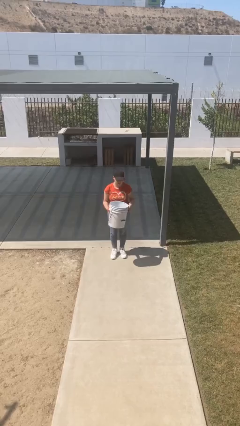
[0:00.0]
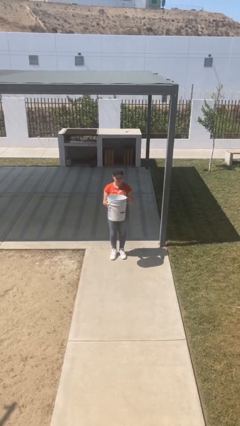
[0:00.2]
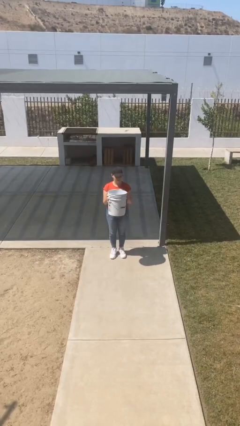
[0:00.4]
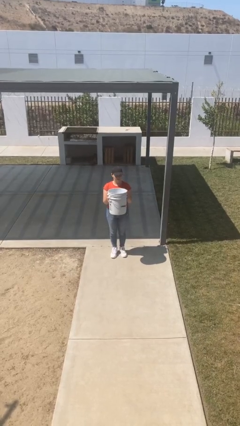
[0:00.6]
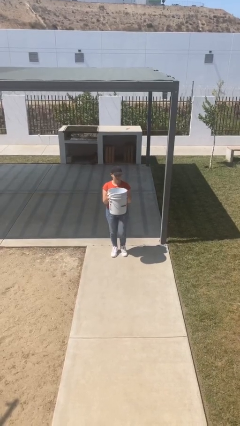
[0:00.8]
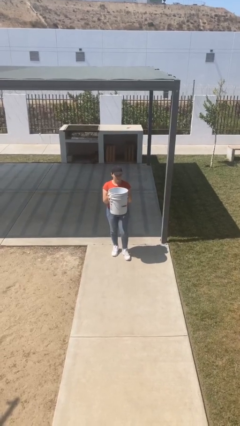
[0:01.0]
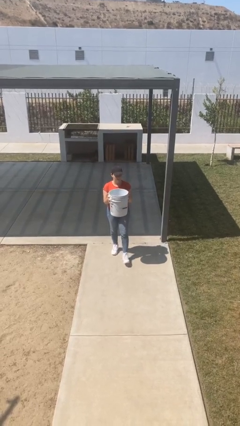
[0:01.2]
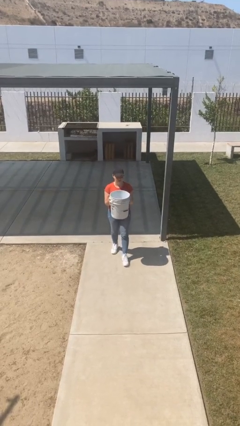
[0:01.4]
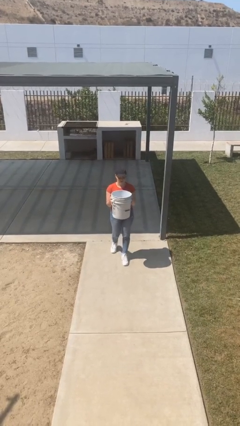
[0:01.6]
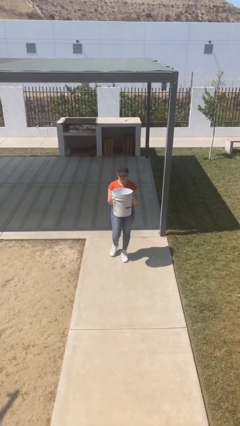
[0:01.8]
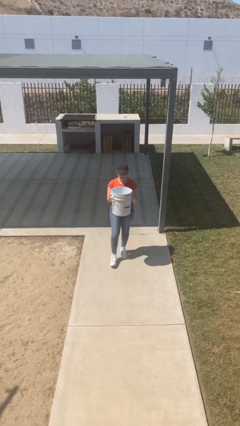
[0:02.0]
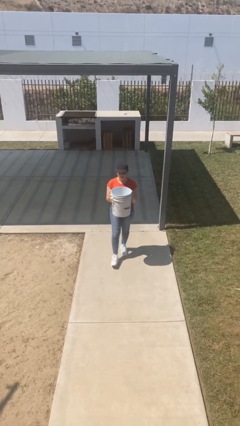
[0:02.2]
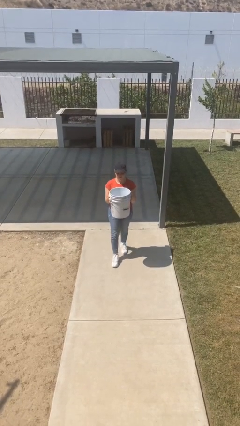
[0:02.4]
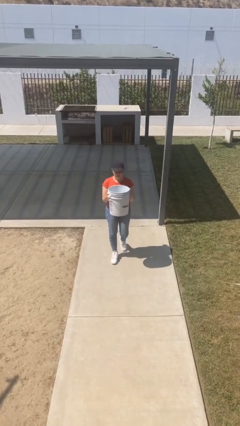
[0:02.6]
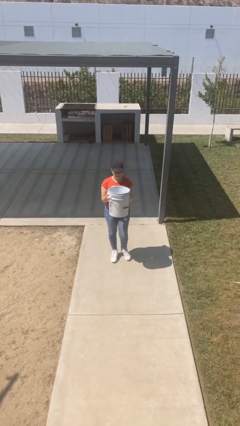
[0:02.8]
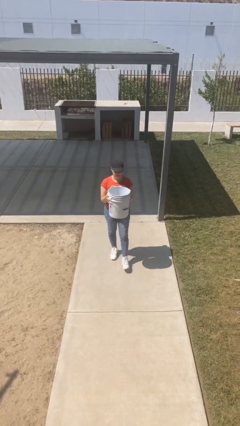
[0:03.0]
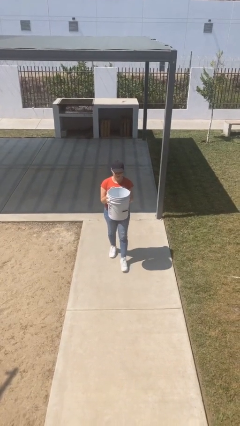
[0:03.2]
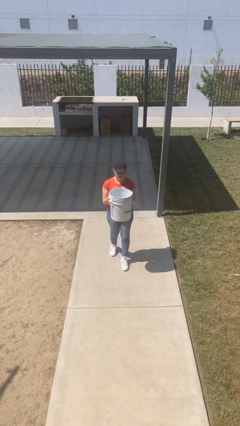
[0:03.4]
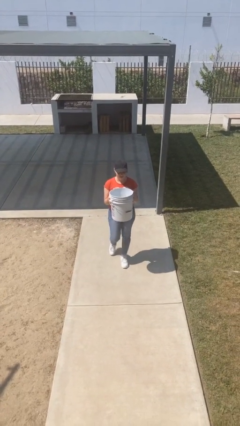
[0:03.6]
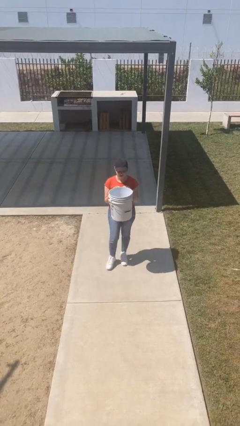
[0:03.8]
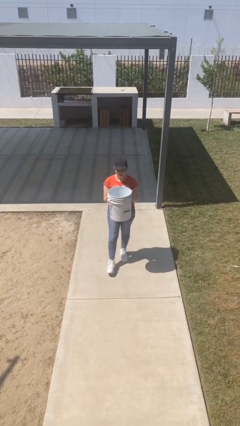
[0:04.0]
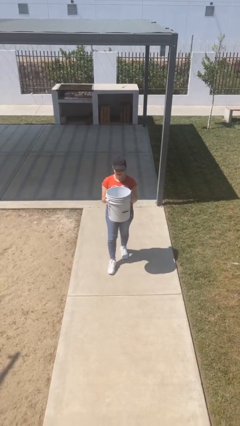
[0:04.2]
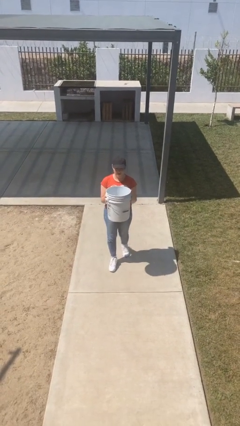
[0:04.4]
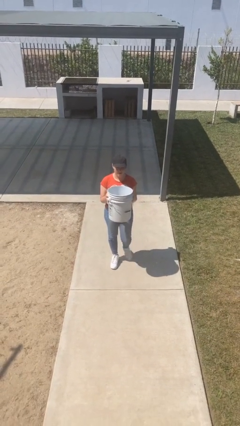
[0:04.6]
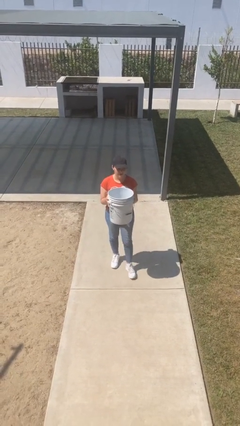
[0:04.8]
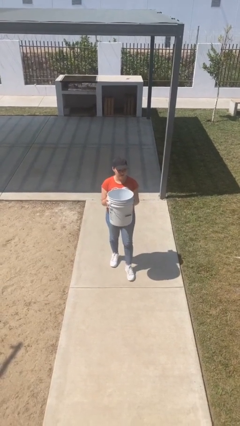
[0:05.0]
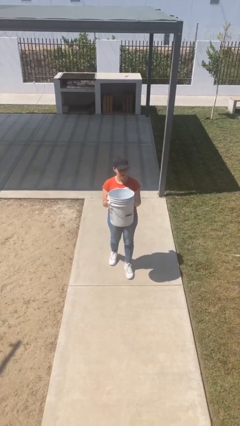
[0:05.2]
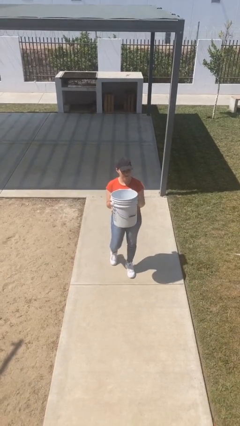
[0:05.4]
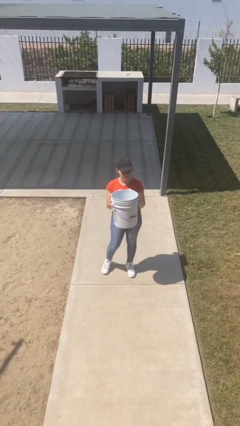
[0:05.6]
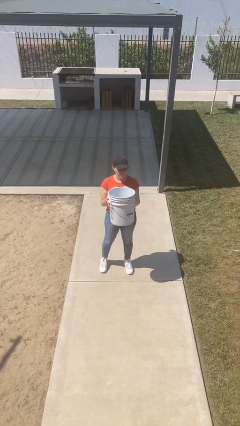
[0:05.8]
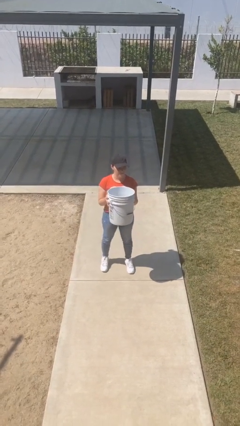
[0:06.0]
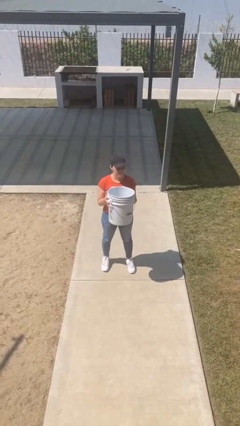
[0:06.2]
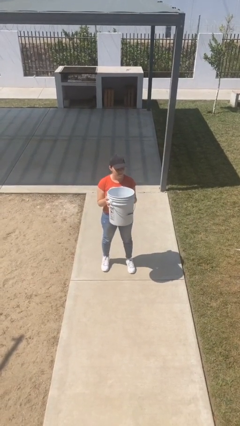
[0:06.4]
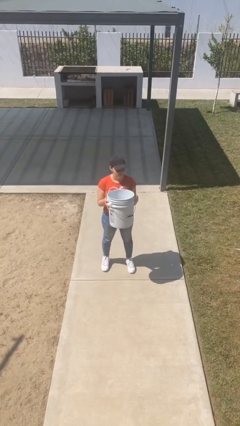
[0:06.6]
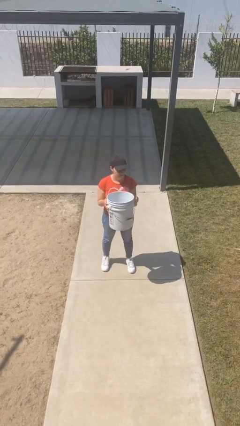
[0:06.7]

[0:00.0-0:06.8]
person carries heavy object

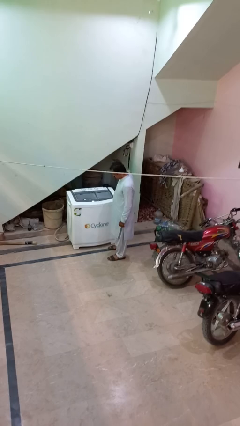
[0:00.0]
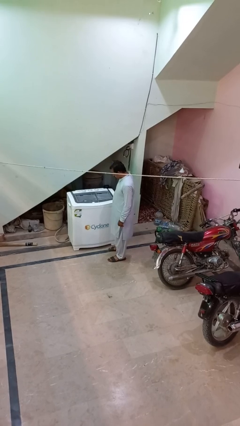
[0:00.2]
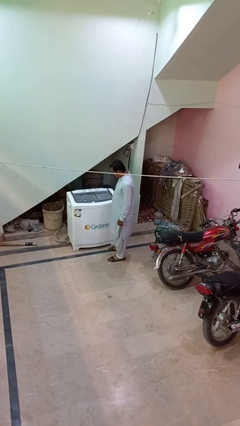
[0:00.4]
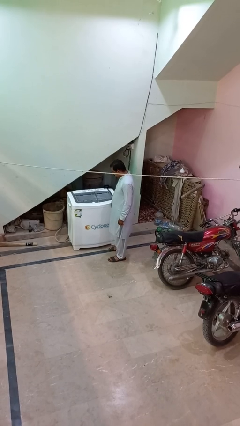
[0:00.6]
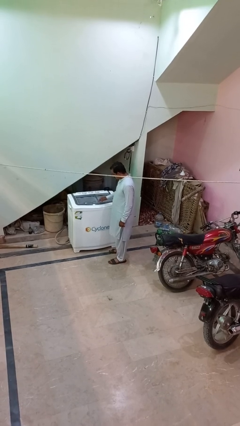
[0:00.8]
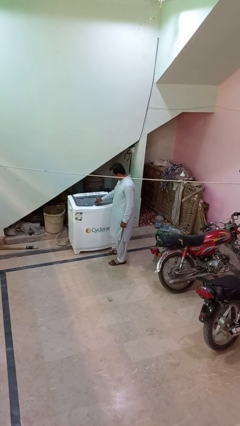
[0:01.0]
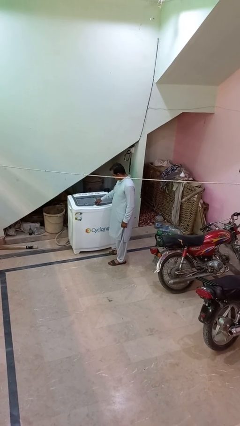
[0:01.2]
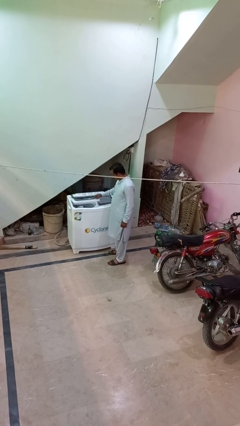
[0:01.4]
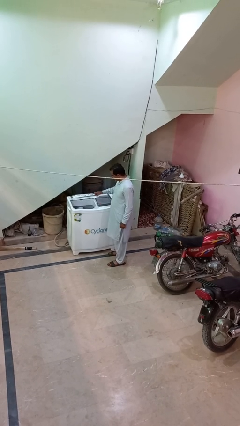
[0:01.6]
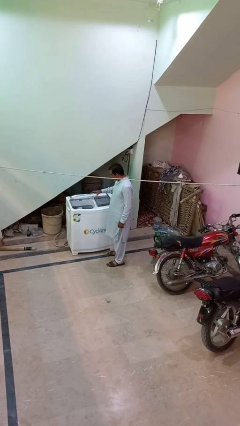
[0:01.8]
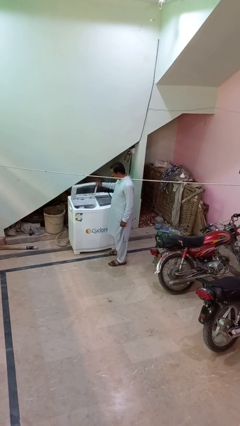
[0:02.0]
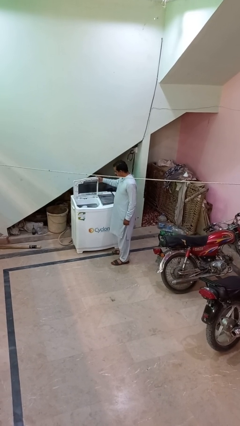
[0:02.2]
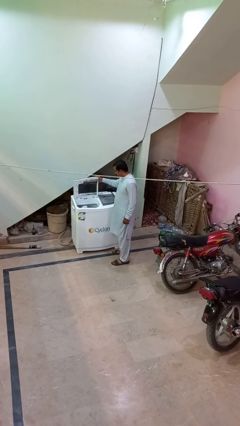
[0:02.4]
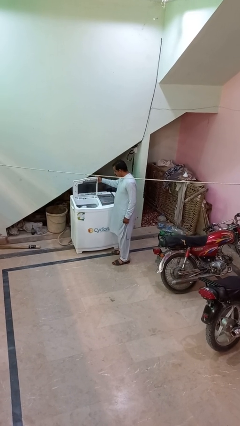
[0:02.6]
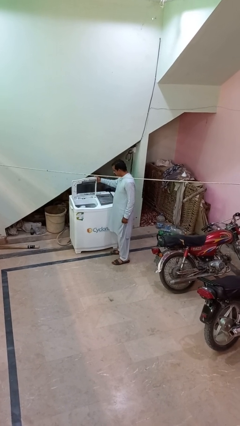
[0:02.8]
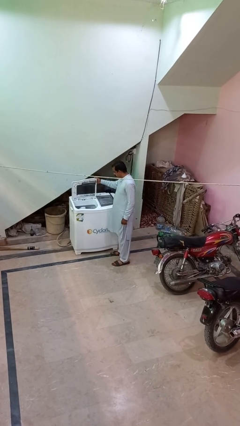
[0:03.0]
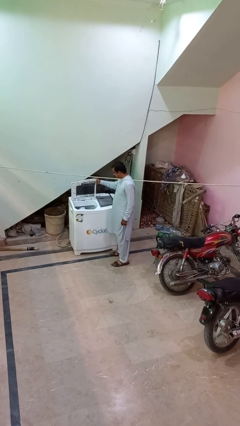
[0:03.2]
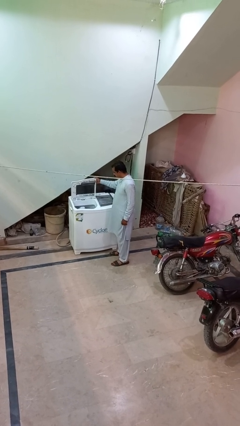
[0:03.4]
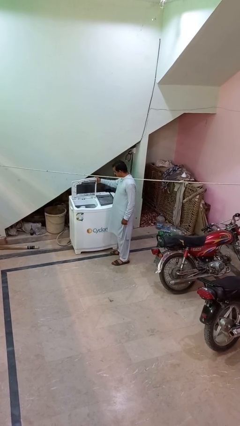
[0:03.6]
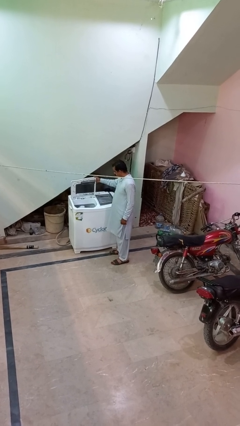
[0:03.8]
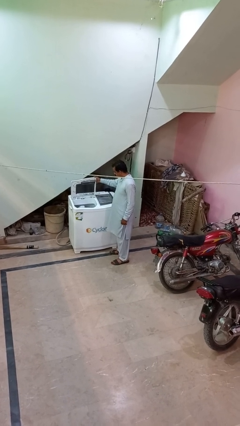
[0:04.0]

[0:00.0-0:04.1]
person opens clothes washer

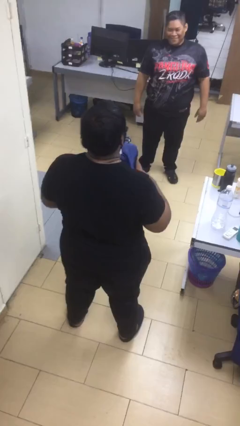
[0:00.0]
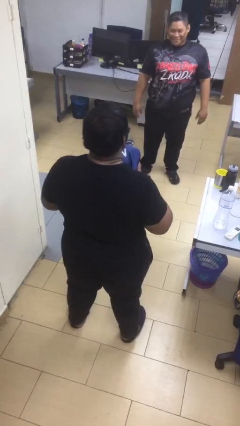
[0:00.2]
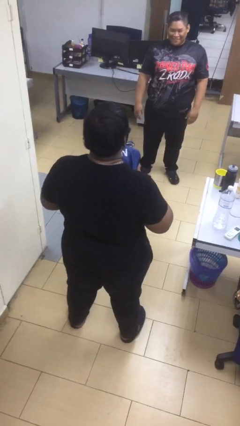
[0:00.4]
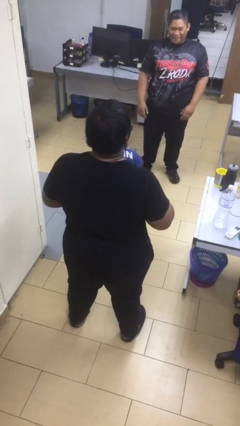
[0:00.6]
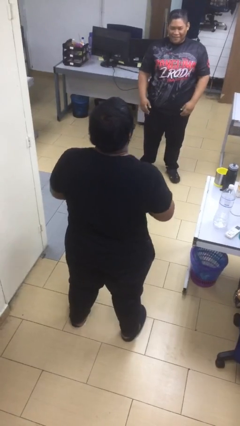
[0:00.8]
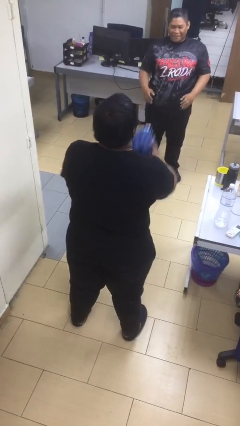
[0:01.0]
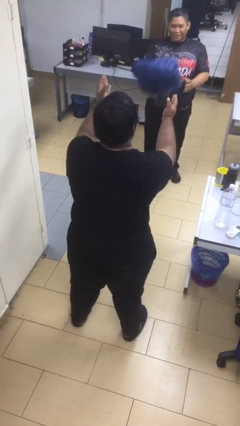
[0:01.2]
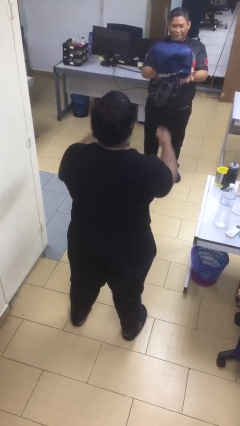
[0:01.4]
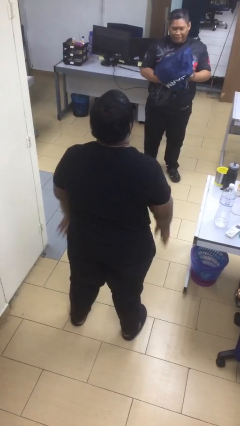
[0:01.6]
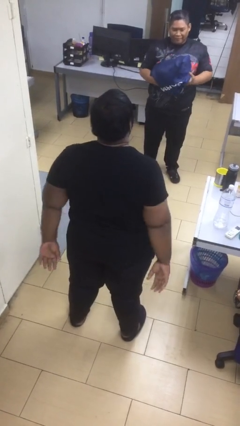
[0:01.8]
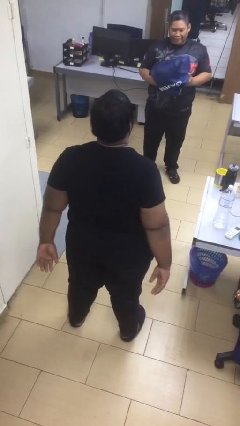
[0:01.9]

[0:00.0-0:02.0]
person throws object to person

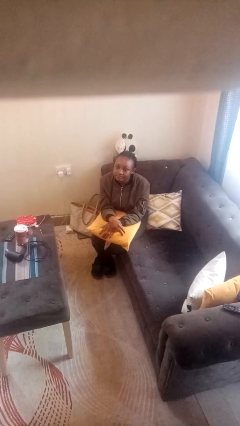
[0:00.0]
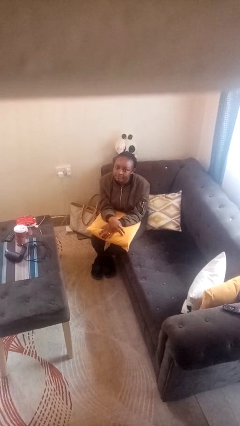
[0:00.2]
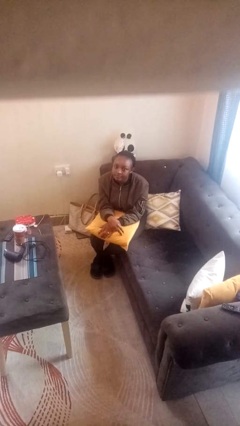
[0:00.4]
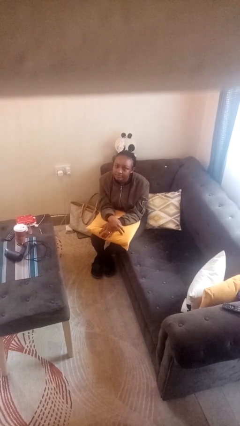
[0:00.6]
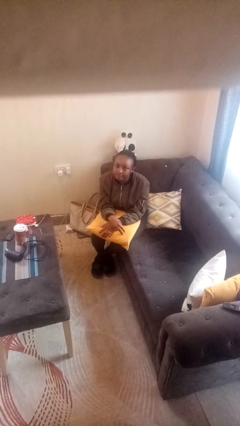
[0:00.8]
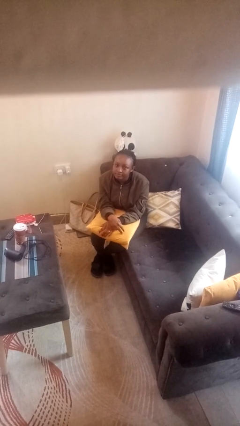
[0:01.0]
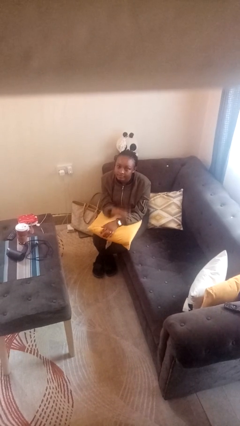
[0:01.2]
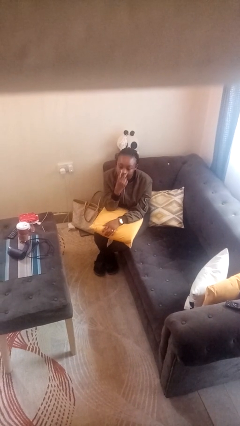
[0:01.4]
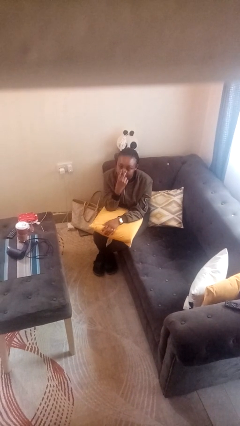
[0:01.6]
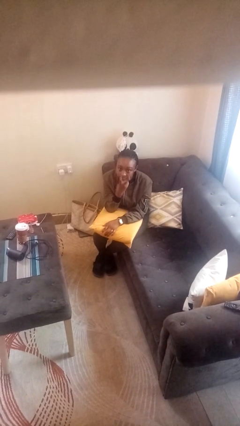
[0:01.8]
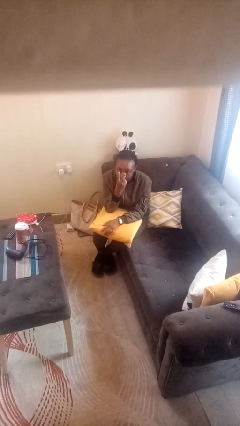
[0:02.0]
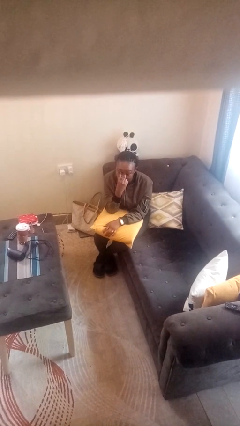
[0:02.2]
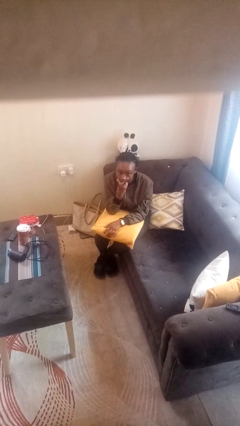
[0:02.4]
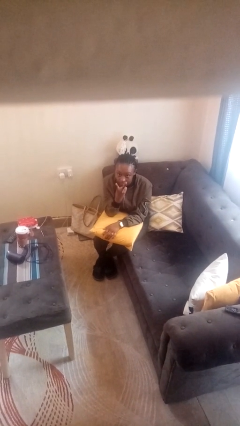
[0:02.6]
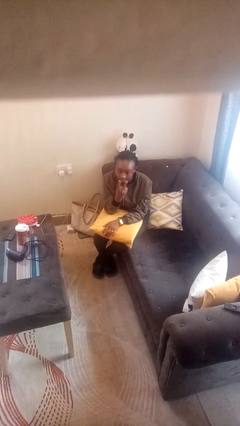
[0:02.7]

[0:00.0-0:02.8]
person gestures watch closely

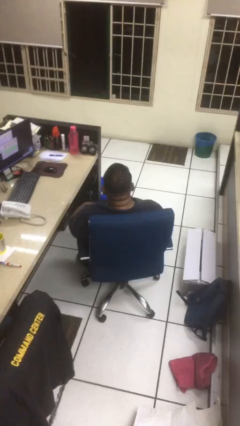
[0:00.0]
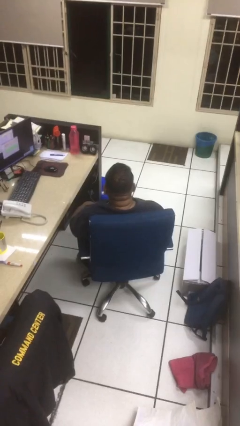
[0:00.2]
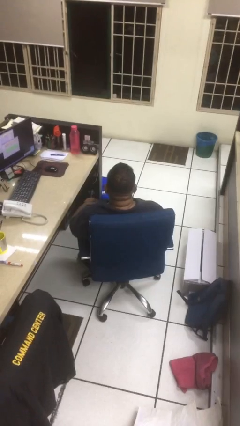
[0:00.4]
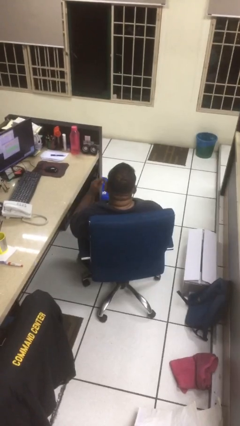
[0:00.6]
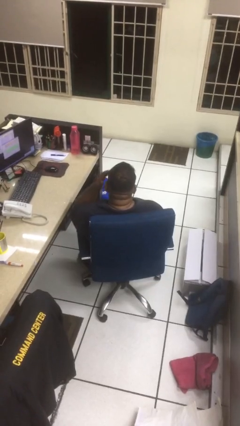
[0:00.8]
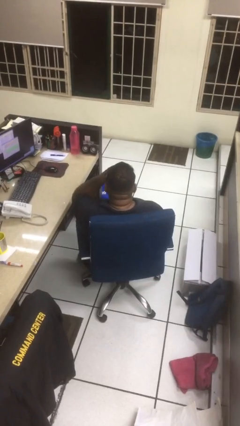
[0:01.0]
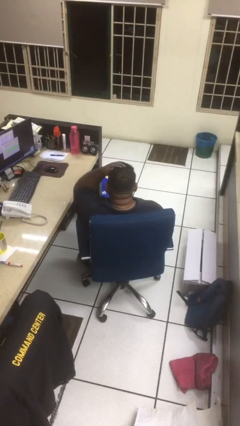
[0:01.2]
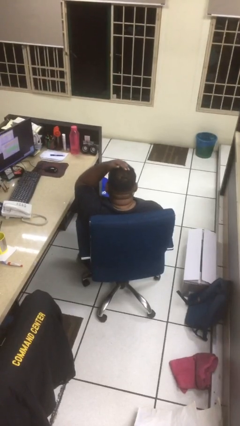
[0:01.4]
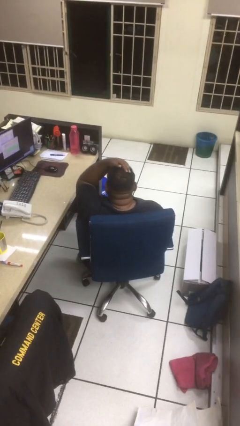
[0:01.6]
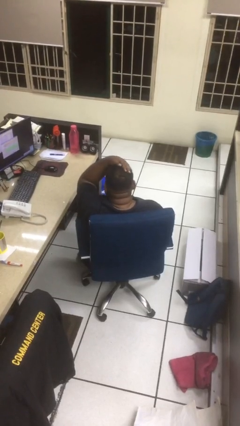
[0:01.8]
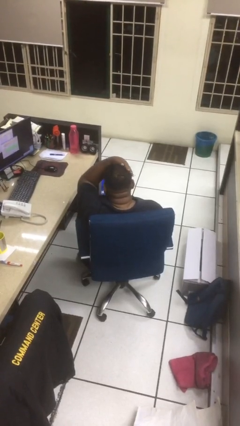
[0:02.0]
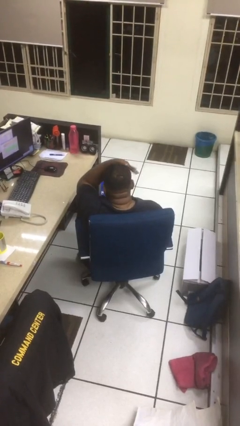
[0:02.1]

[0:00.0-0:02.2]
person strokes hair
